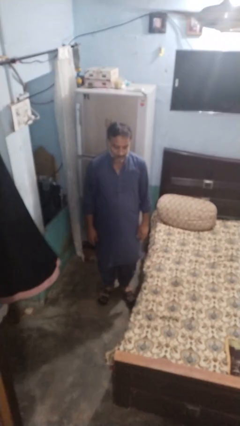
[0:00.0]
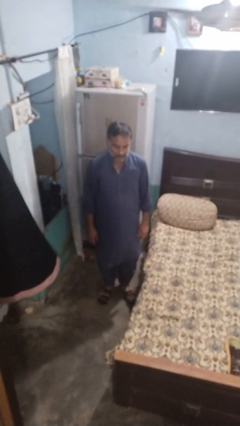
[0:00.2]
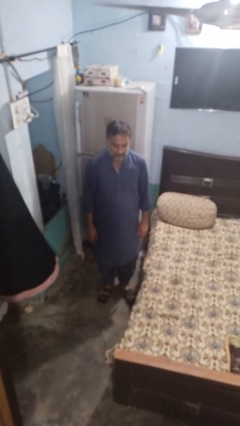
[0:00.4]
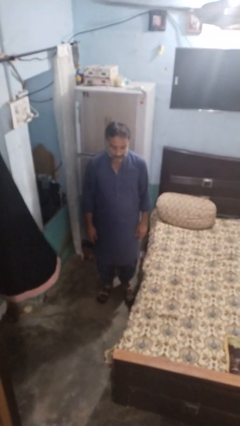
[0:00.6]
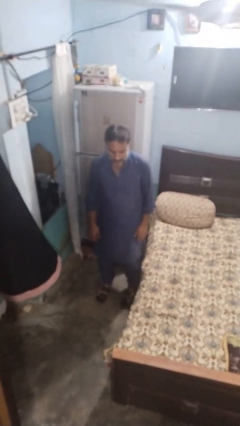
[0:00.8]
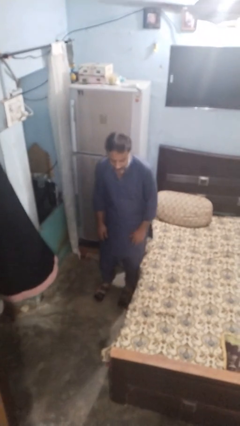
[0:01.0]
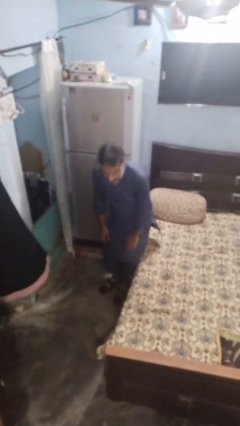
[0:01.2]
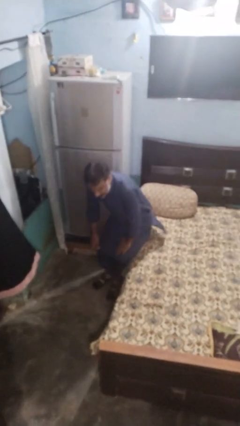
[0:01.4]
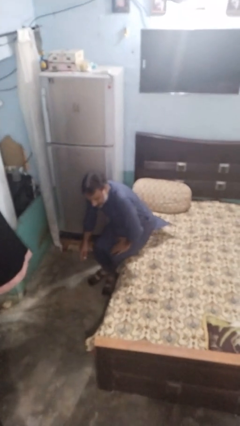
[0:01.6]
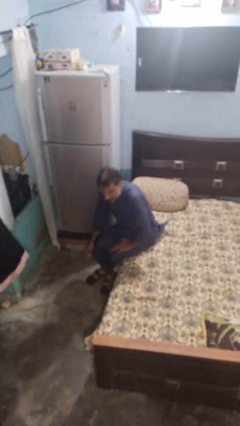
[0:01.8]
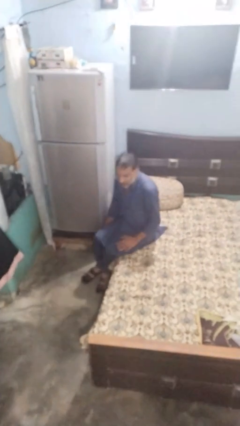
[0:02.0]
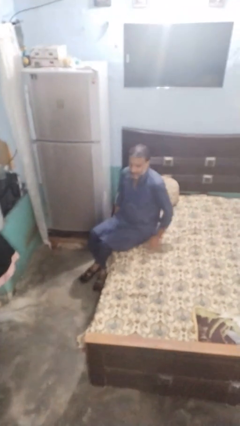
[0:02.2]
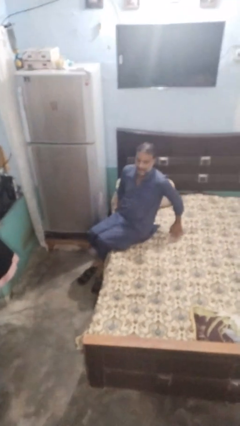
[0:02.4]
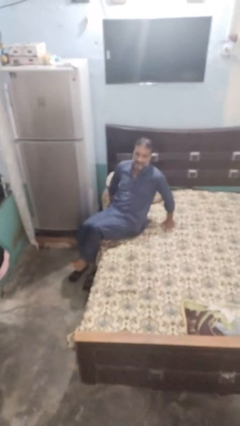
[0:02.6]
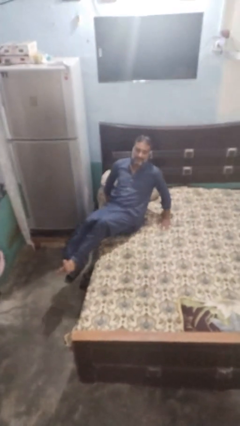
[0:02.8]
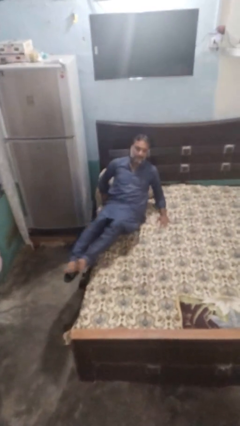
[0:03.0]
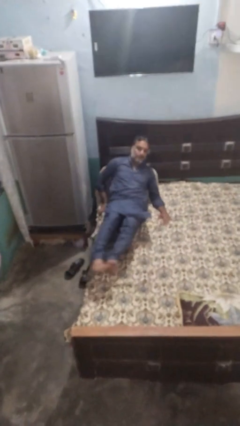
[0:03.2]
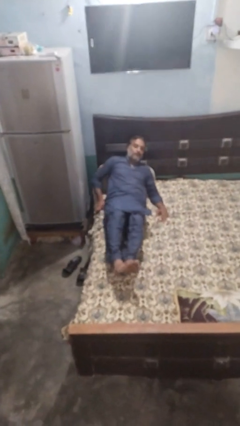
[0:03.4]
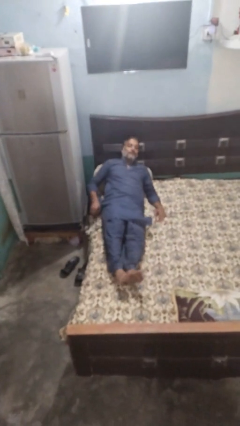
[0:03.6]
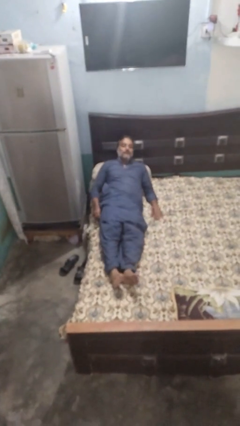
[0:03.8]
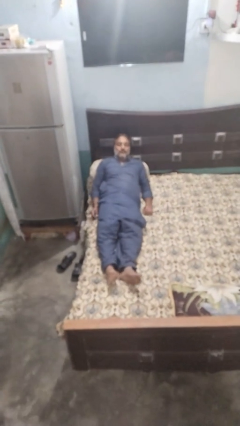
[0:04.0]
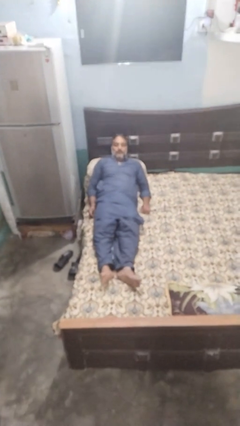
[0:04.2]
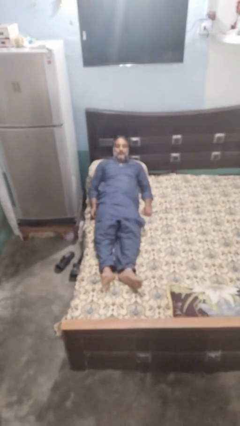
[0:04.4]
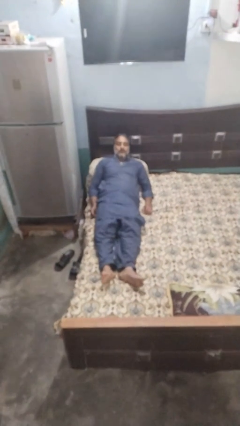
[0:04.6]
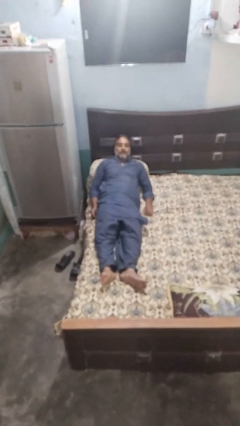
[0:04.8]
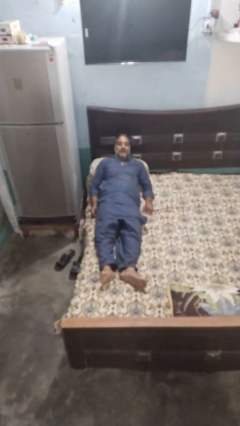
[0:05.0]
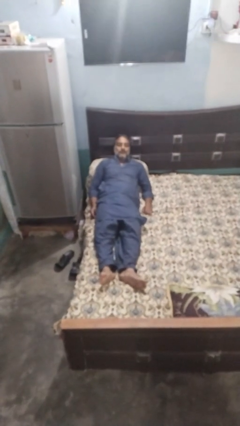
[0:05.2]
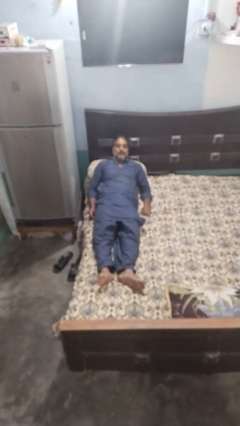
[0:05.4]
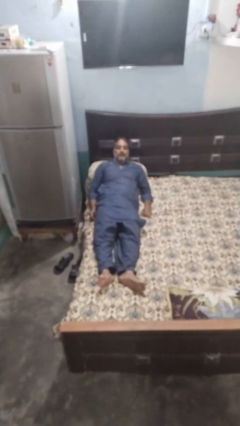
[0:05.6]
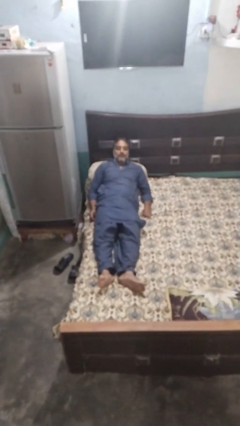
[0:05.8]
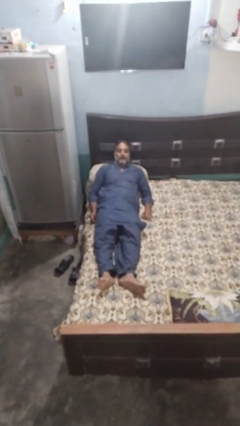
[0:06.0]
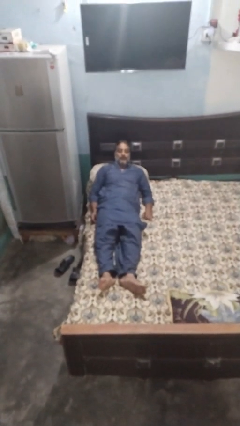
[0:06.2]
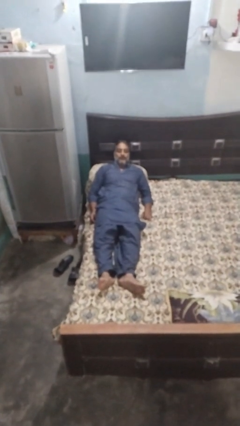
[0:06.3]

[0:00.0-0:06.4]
person lies down on bed

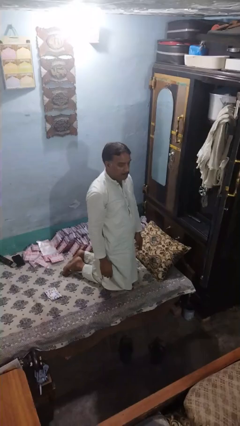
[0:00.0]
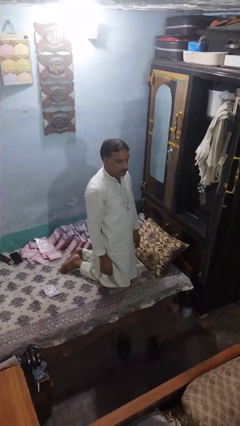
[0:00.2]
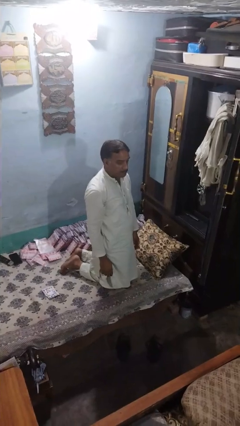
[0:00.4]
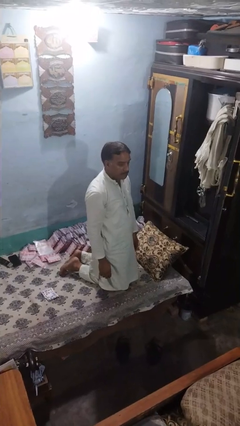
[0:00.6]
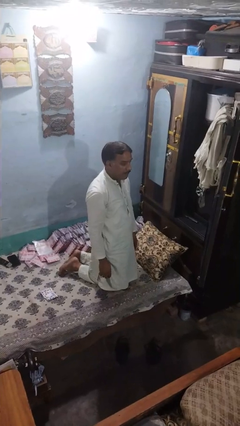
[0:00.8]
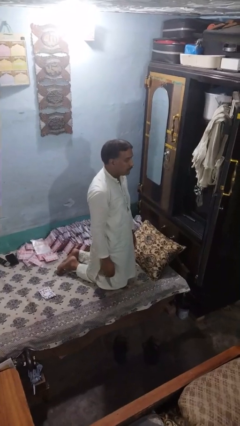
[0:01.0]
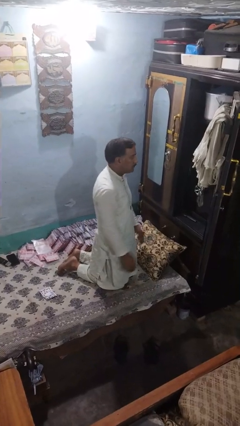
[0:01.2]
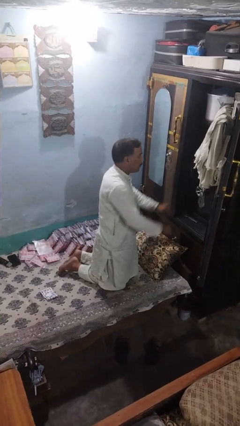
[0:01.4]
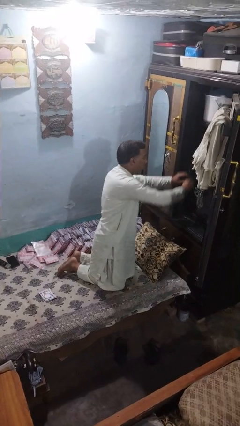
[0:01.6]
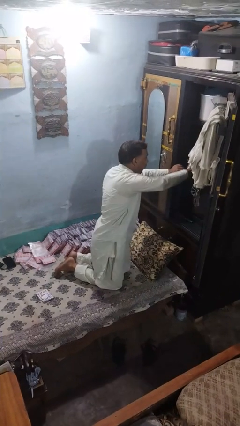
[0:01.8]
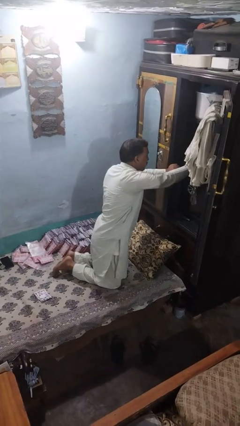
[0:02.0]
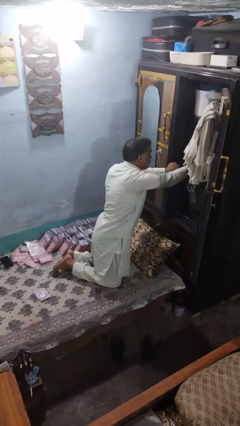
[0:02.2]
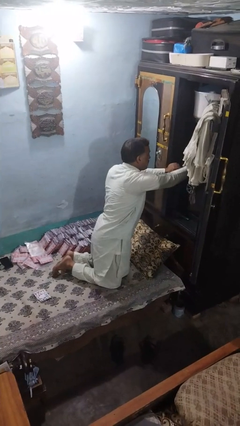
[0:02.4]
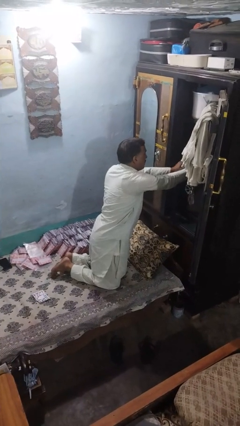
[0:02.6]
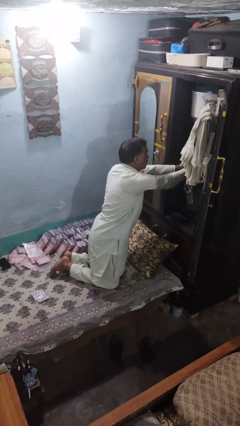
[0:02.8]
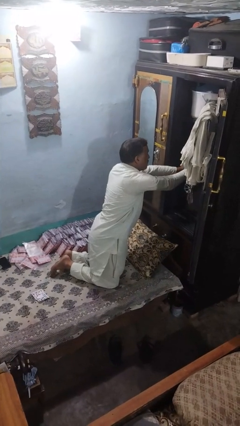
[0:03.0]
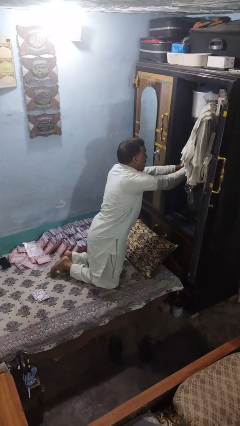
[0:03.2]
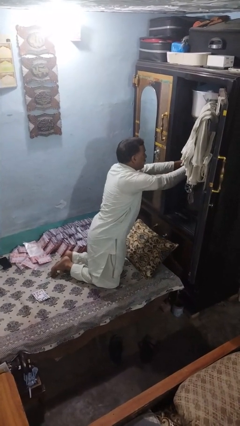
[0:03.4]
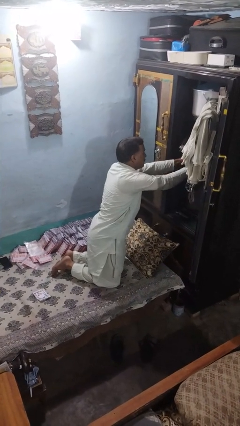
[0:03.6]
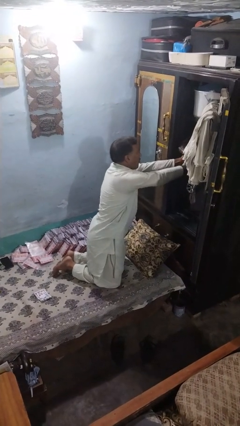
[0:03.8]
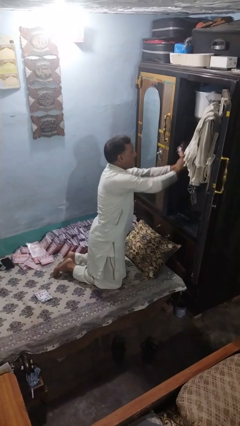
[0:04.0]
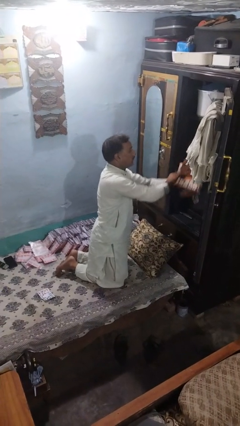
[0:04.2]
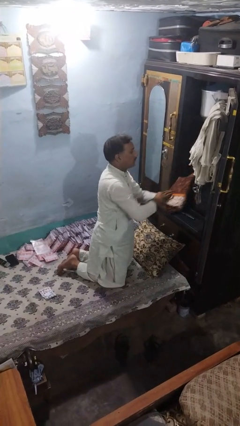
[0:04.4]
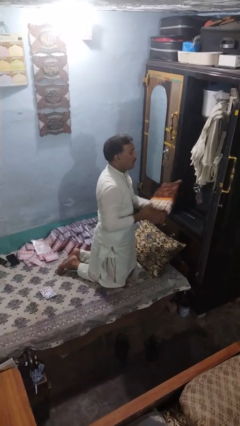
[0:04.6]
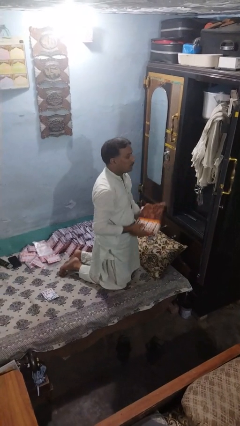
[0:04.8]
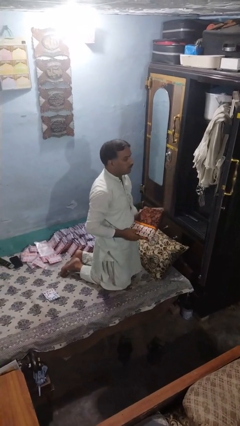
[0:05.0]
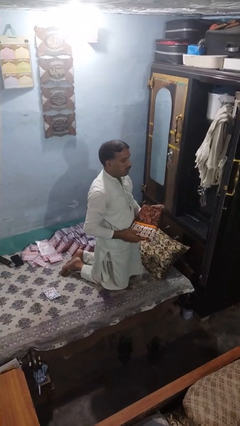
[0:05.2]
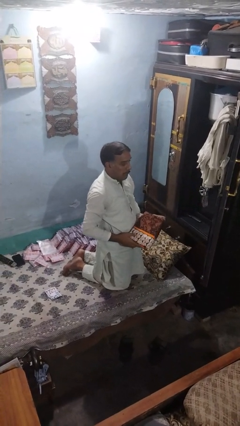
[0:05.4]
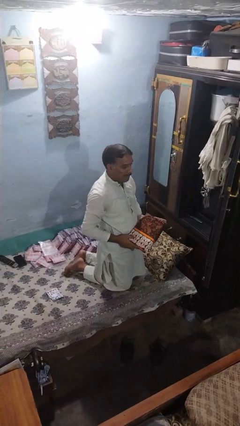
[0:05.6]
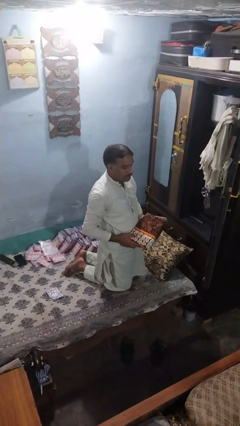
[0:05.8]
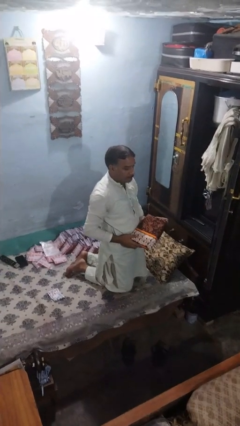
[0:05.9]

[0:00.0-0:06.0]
person takes clothes from dresser

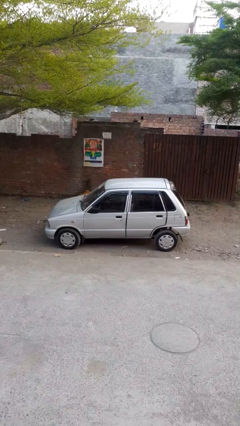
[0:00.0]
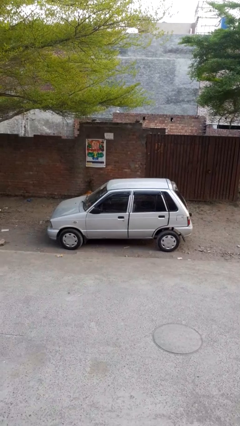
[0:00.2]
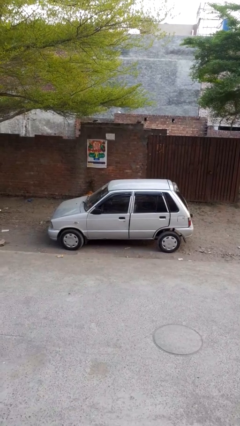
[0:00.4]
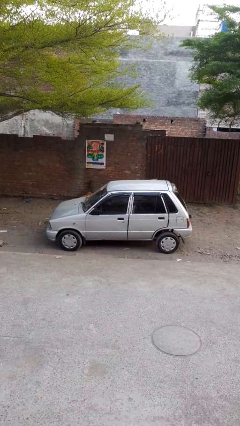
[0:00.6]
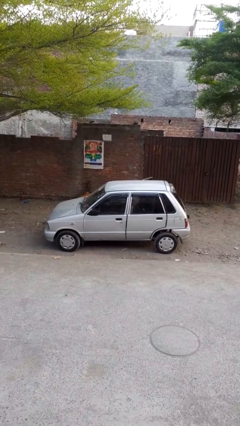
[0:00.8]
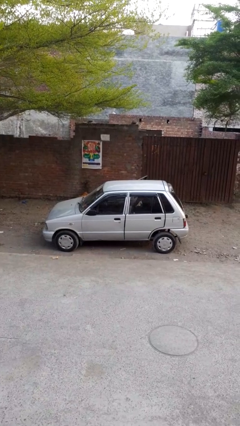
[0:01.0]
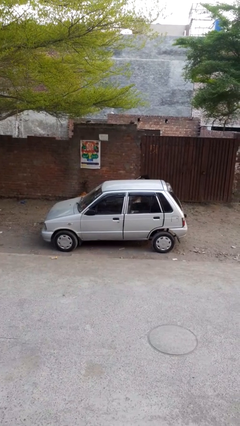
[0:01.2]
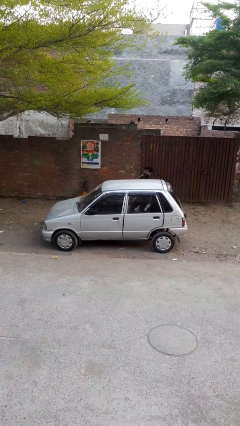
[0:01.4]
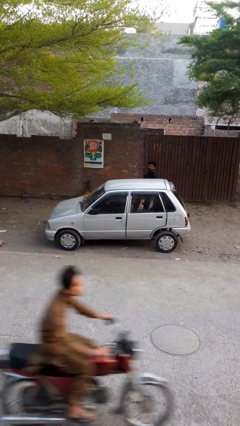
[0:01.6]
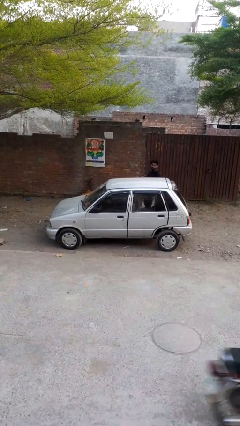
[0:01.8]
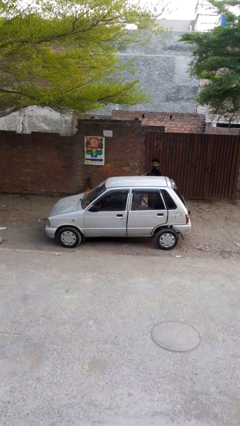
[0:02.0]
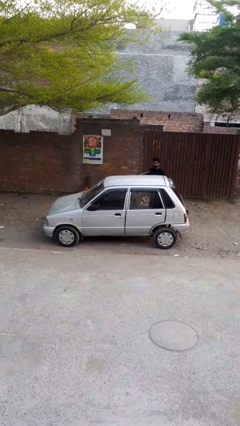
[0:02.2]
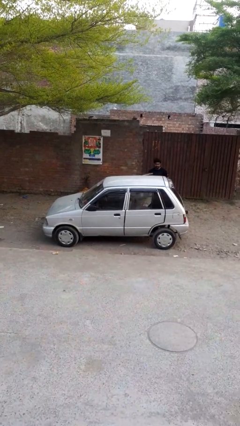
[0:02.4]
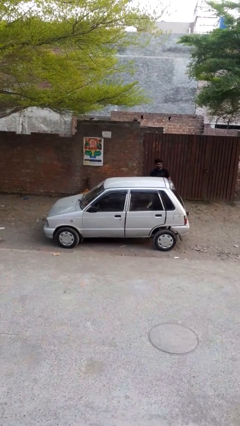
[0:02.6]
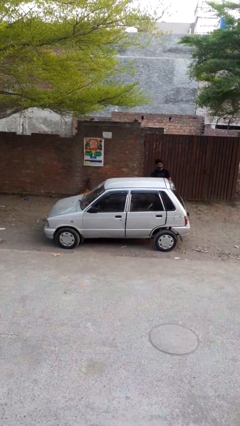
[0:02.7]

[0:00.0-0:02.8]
car drops off person

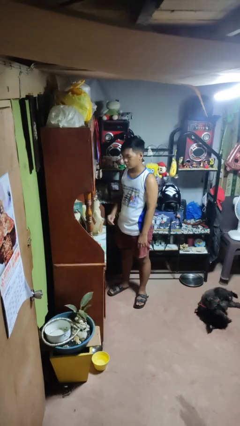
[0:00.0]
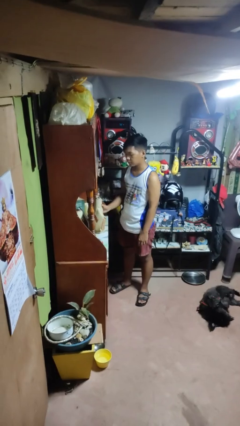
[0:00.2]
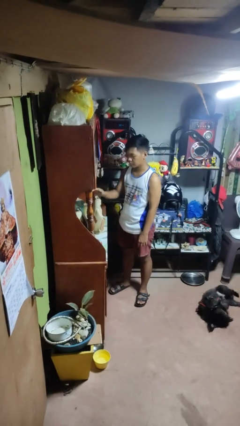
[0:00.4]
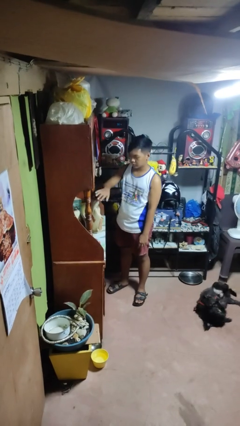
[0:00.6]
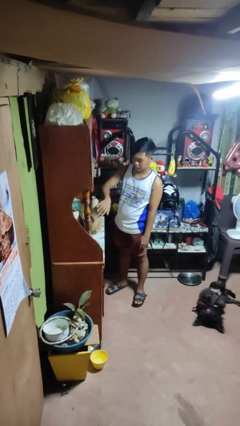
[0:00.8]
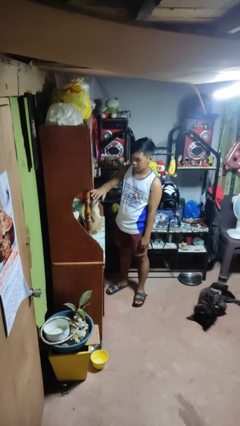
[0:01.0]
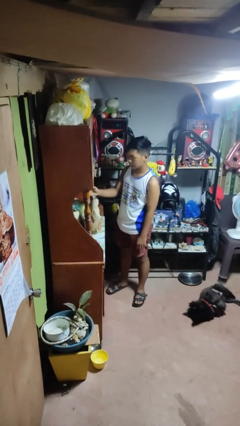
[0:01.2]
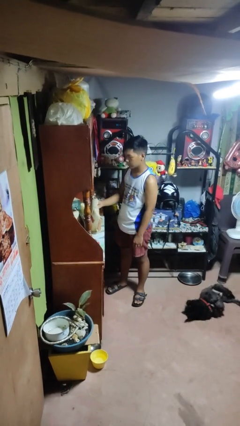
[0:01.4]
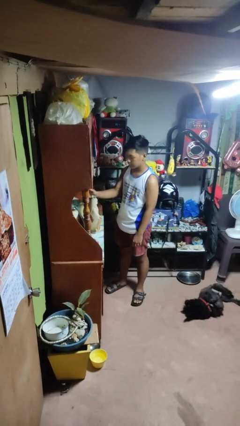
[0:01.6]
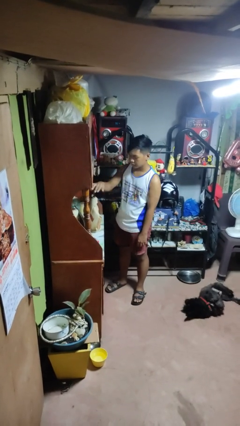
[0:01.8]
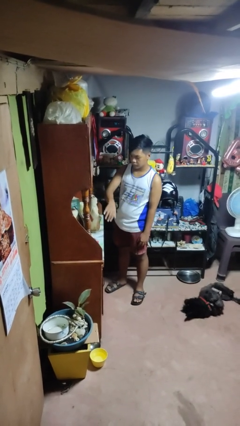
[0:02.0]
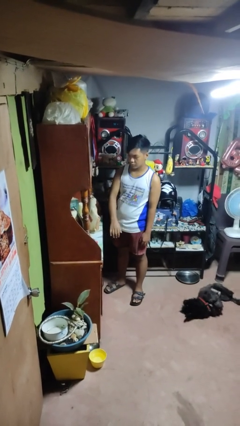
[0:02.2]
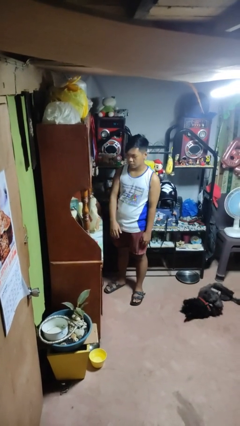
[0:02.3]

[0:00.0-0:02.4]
person waves hand over object
